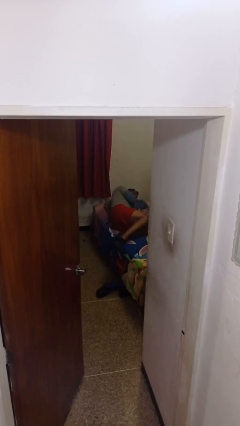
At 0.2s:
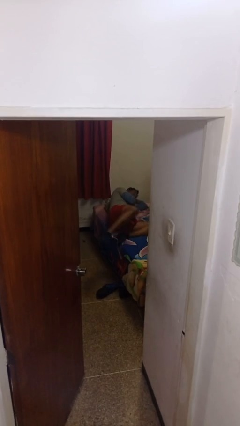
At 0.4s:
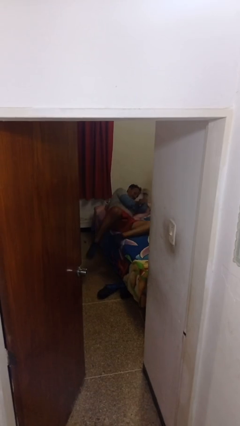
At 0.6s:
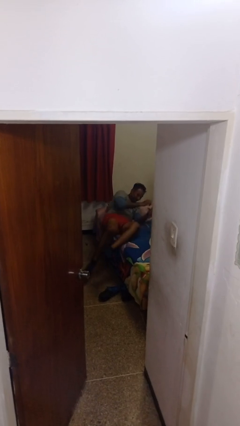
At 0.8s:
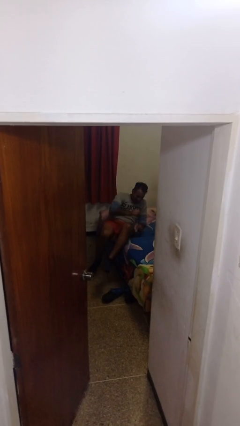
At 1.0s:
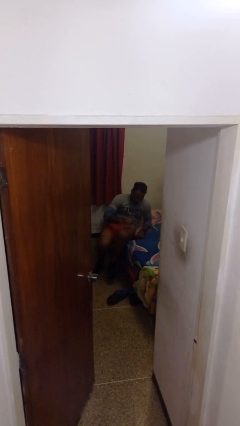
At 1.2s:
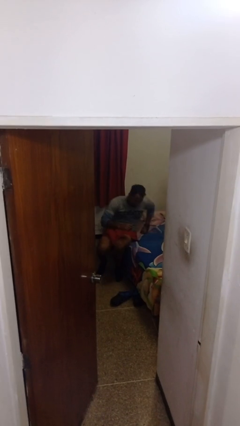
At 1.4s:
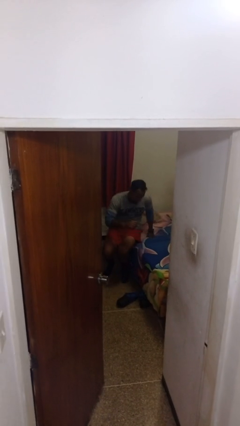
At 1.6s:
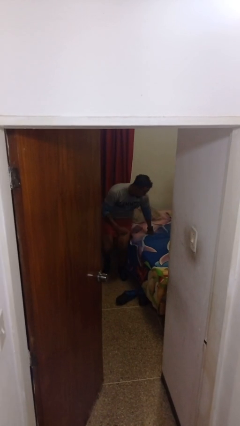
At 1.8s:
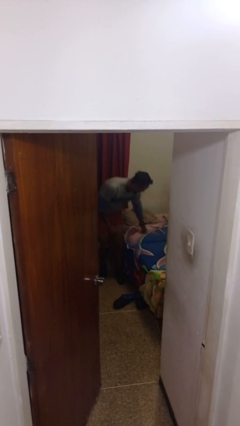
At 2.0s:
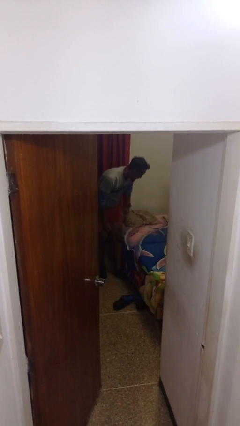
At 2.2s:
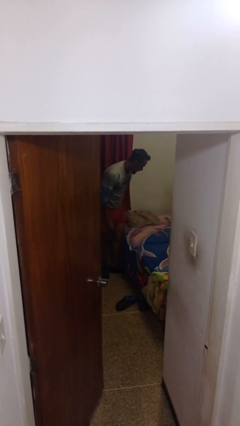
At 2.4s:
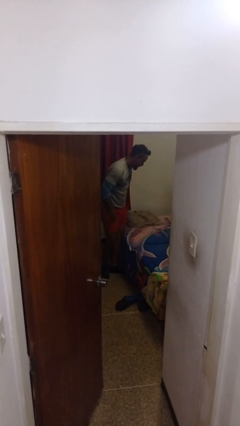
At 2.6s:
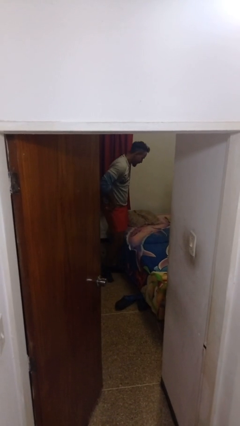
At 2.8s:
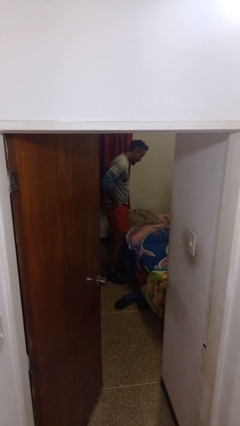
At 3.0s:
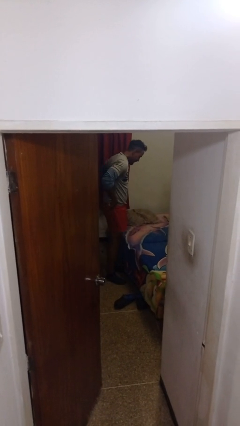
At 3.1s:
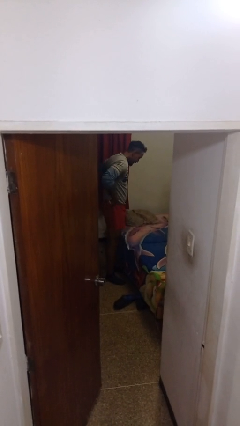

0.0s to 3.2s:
person stands up

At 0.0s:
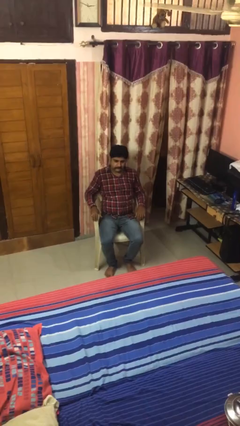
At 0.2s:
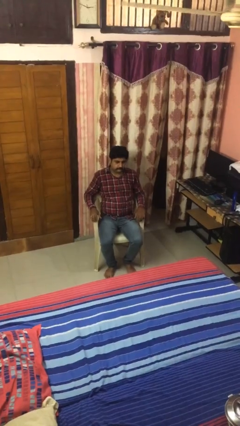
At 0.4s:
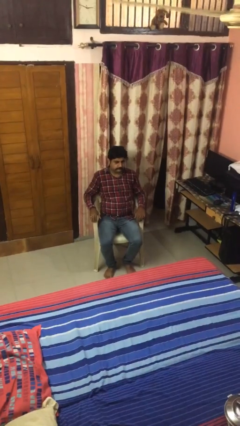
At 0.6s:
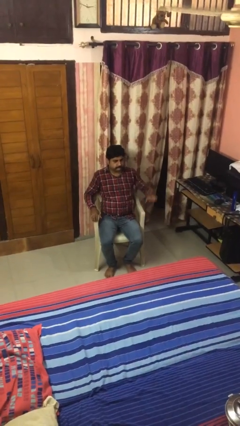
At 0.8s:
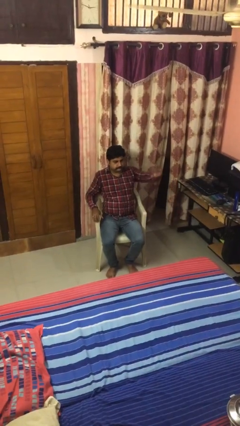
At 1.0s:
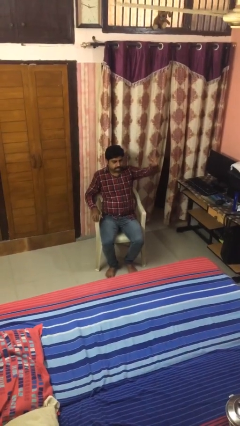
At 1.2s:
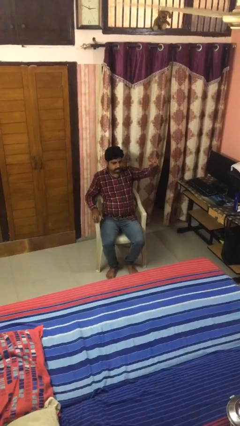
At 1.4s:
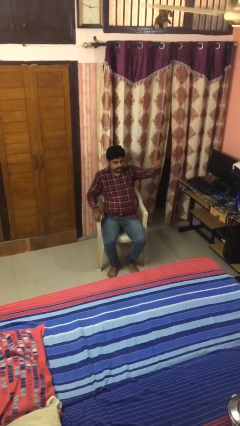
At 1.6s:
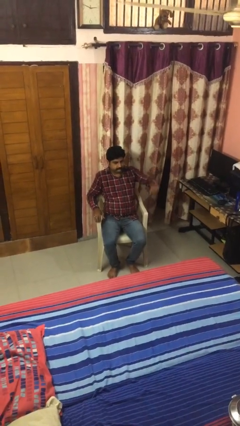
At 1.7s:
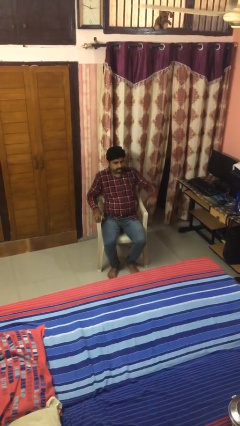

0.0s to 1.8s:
person gestures come here

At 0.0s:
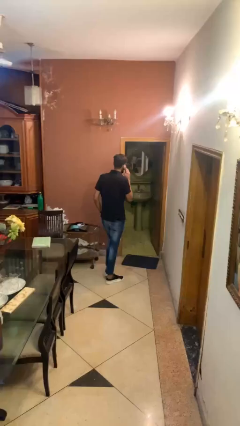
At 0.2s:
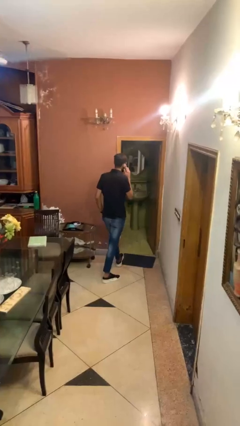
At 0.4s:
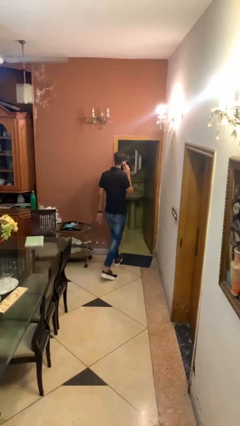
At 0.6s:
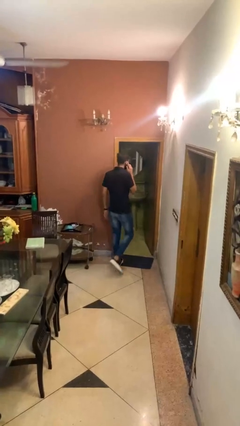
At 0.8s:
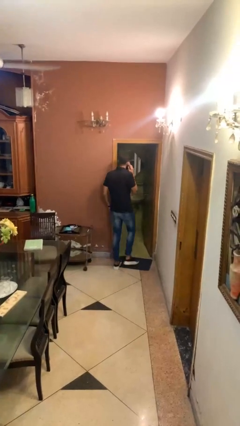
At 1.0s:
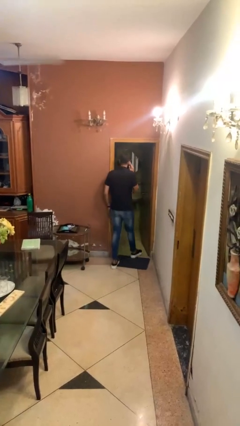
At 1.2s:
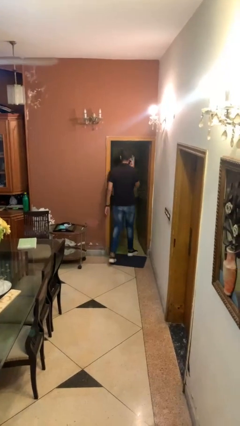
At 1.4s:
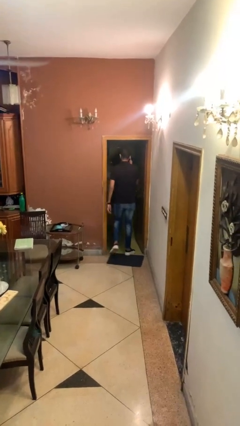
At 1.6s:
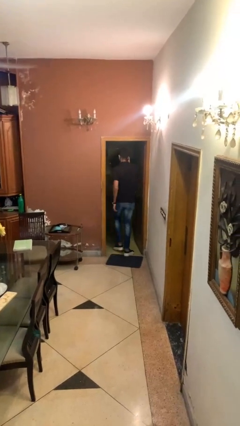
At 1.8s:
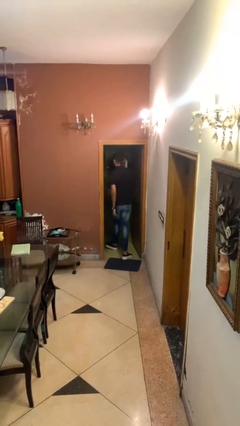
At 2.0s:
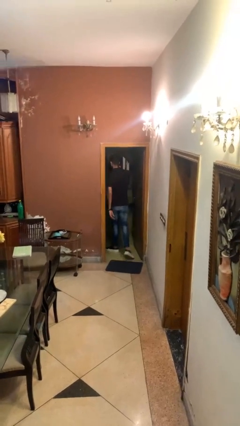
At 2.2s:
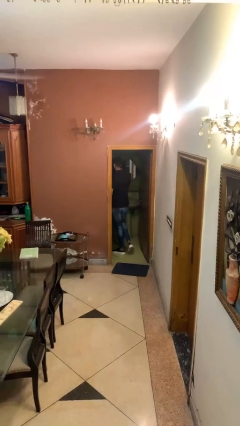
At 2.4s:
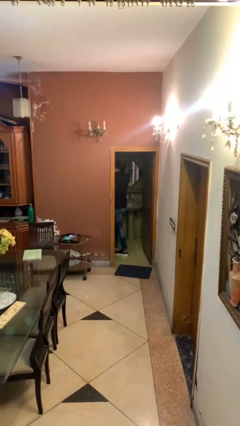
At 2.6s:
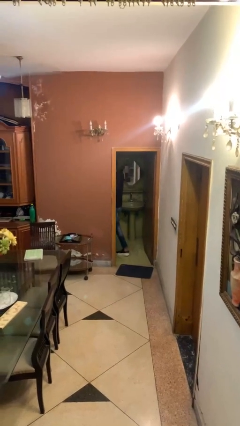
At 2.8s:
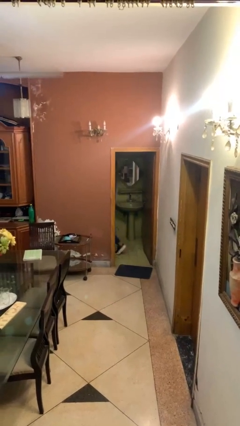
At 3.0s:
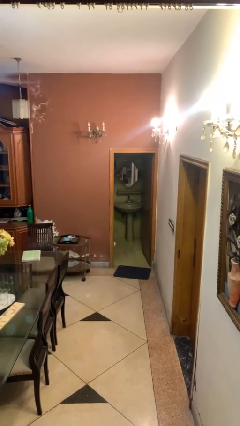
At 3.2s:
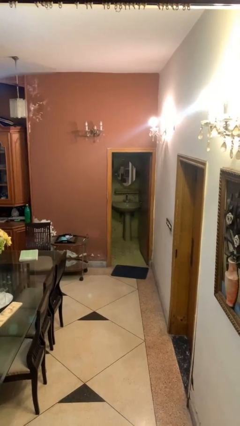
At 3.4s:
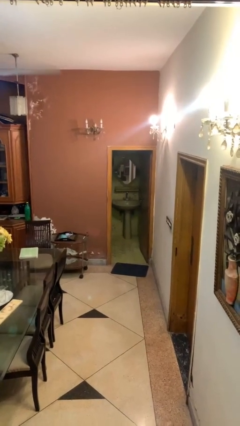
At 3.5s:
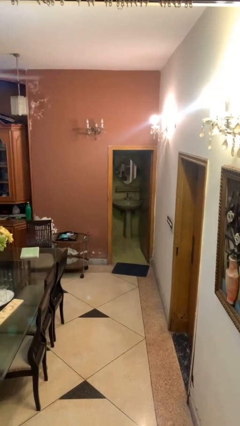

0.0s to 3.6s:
person exits scene through structure

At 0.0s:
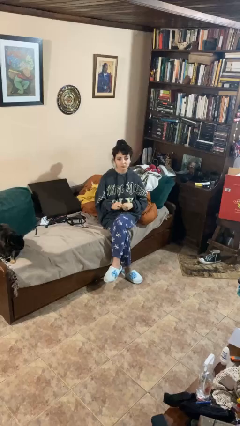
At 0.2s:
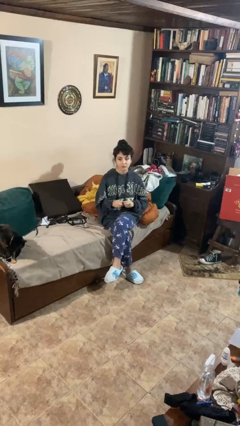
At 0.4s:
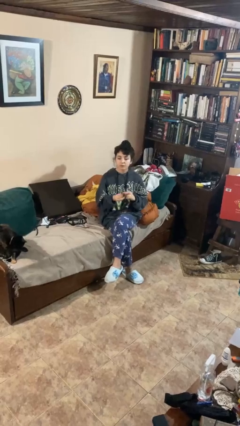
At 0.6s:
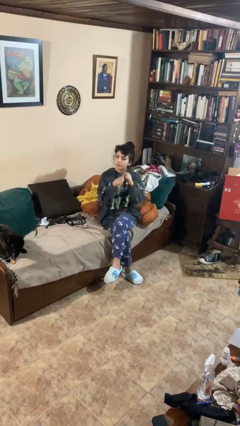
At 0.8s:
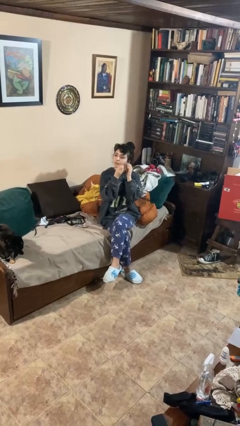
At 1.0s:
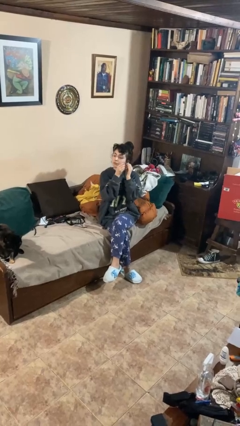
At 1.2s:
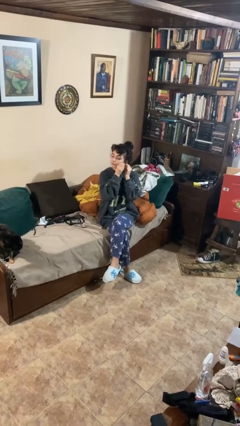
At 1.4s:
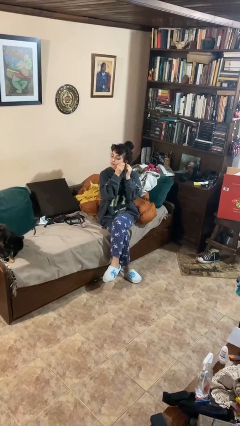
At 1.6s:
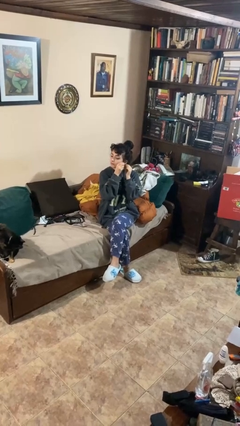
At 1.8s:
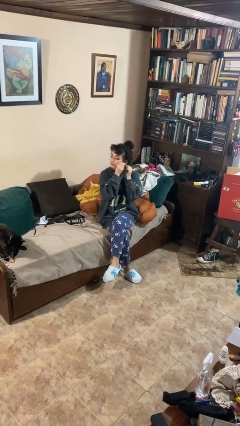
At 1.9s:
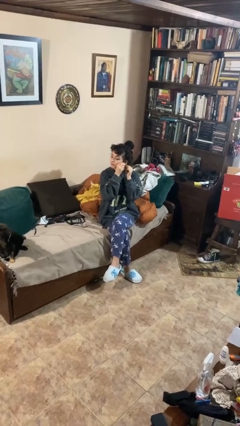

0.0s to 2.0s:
person puts on earrings

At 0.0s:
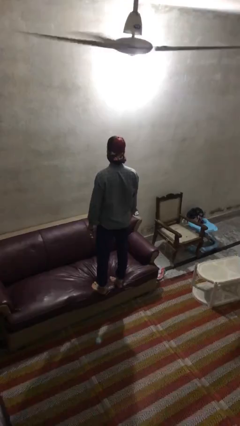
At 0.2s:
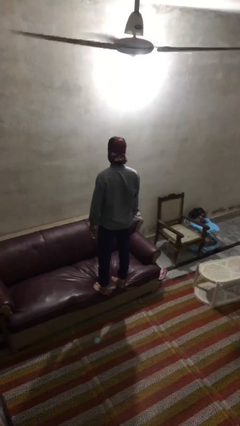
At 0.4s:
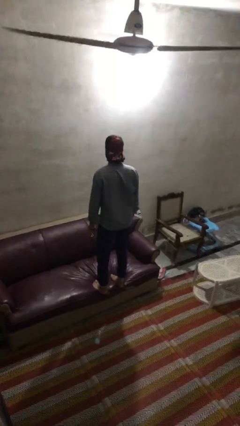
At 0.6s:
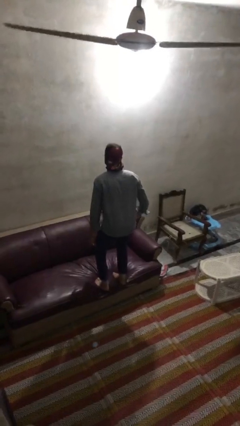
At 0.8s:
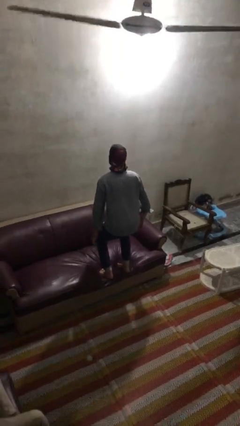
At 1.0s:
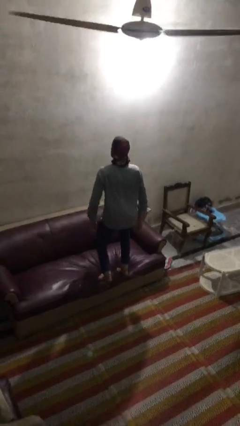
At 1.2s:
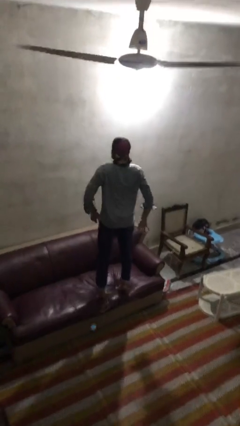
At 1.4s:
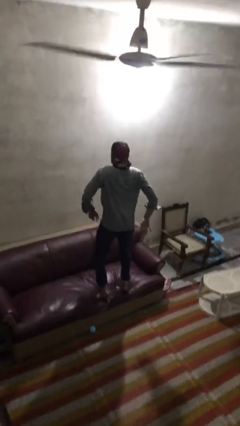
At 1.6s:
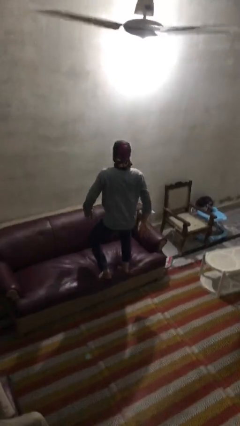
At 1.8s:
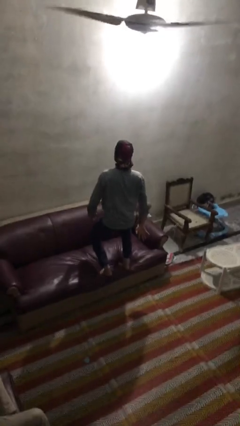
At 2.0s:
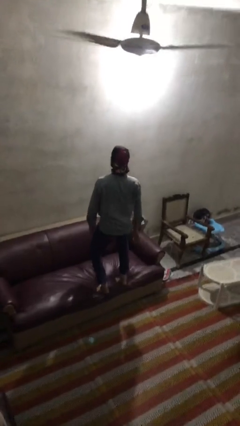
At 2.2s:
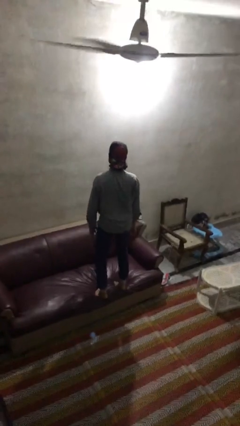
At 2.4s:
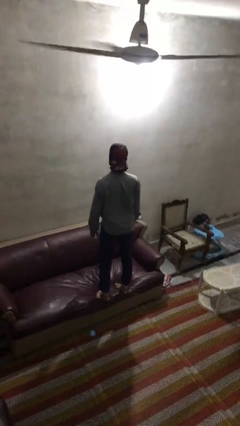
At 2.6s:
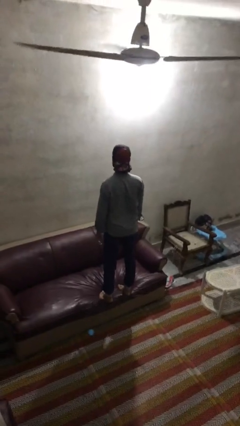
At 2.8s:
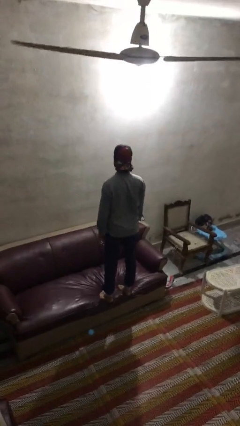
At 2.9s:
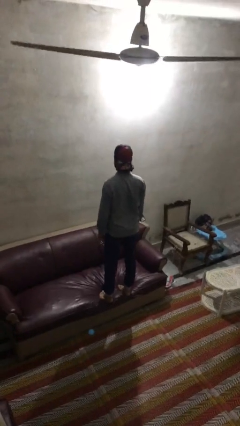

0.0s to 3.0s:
person jumps on couch

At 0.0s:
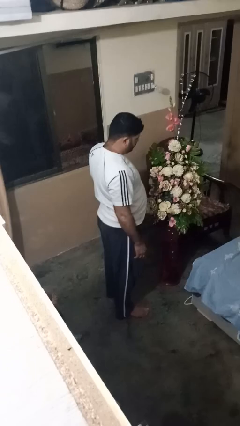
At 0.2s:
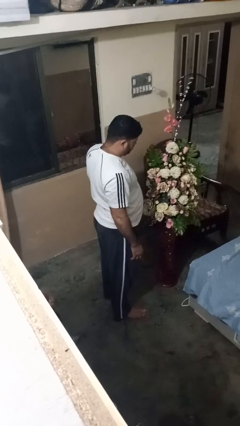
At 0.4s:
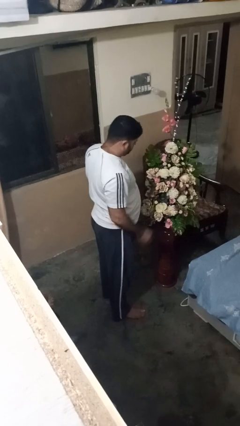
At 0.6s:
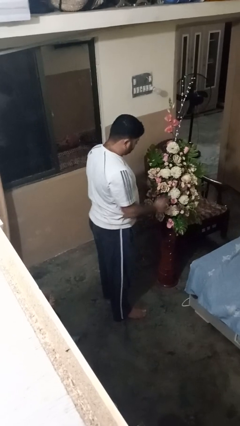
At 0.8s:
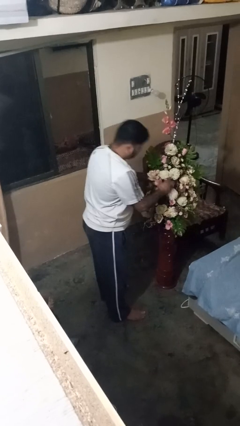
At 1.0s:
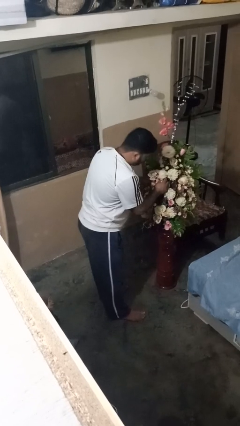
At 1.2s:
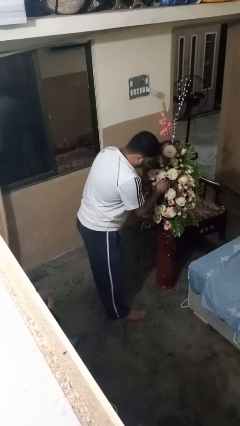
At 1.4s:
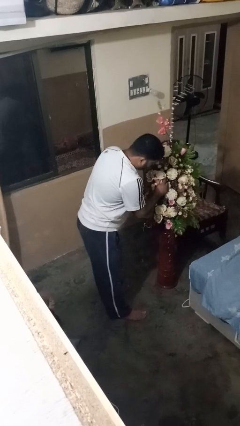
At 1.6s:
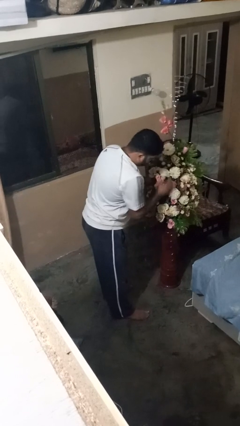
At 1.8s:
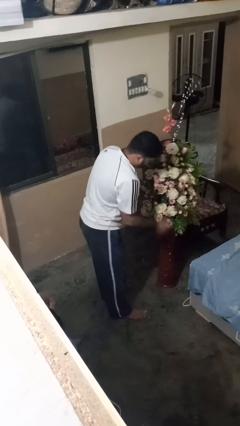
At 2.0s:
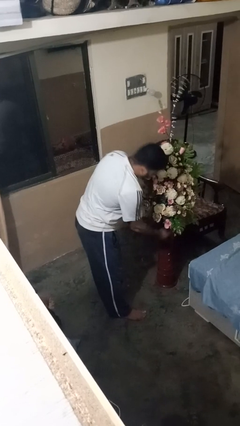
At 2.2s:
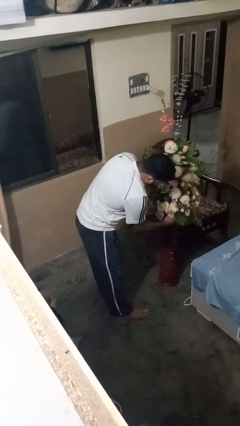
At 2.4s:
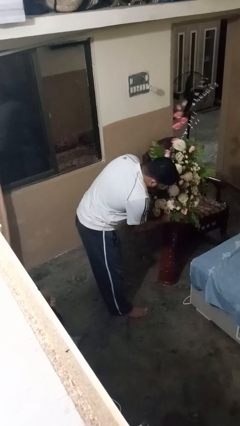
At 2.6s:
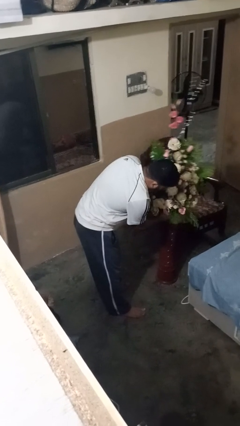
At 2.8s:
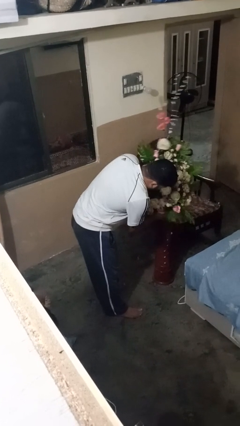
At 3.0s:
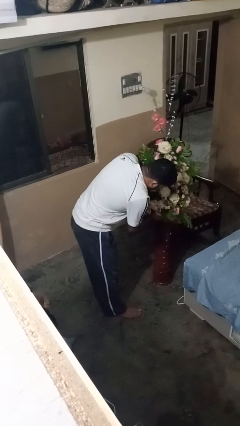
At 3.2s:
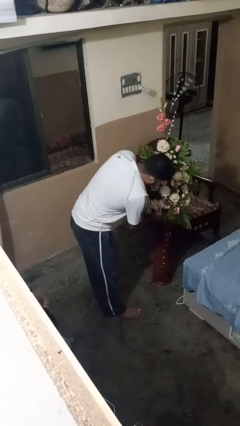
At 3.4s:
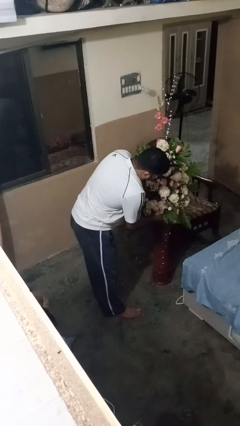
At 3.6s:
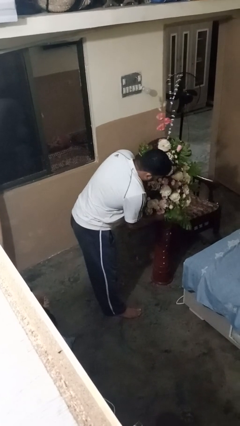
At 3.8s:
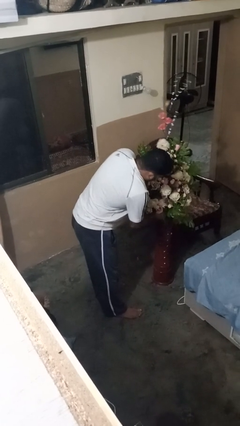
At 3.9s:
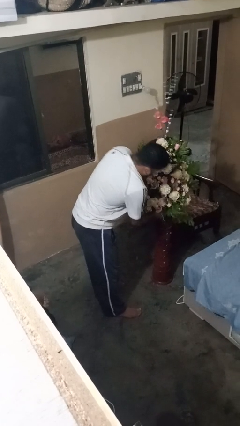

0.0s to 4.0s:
person arranges flowers in vase
